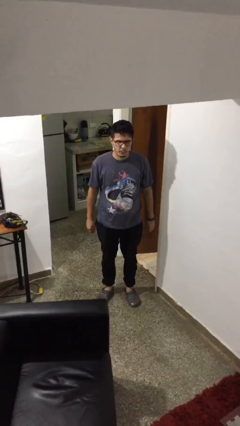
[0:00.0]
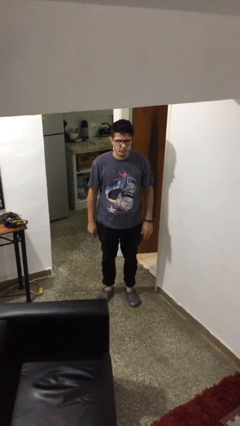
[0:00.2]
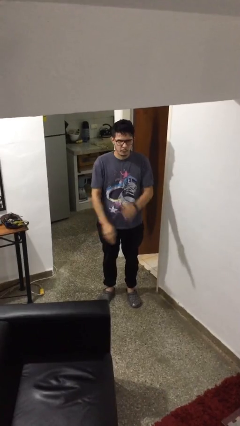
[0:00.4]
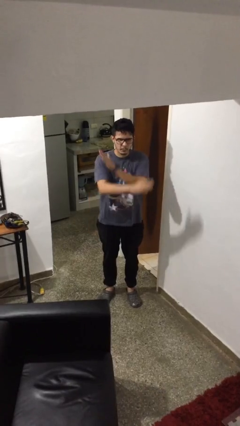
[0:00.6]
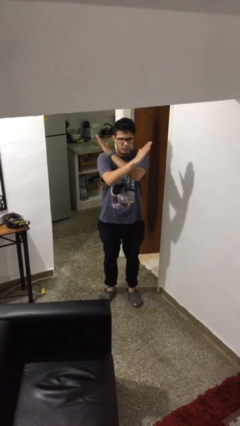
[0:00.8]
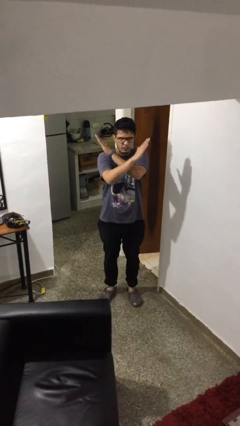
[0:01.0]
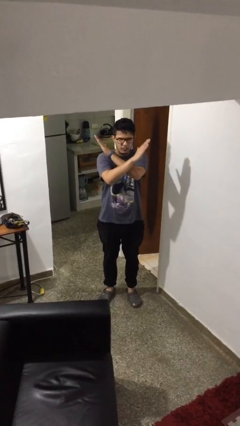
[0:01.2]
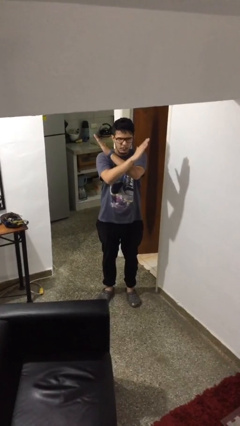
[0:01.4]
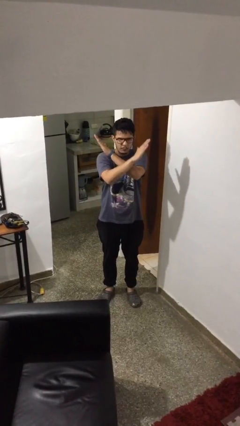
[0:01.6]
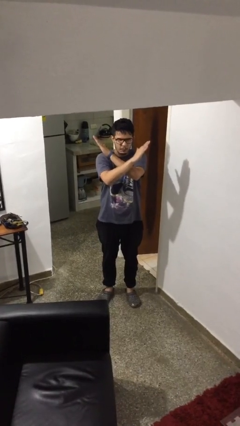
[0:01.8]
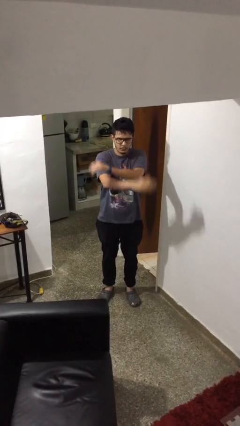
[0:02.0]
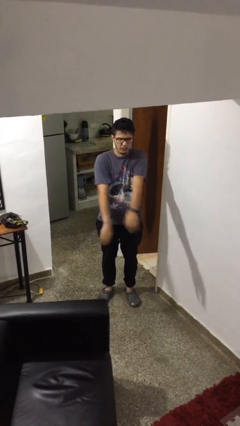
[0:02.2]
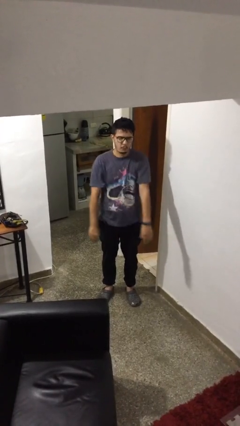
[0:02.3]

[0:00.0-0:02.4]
person gestures arms x

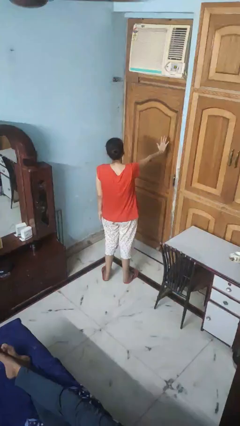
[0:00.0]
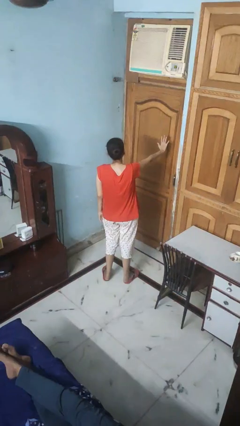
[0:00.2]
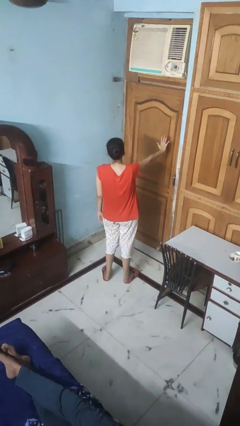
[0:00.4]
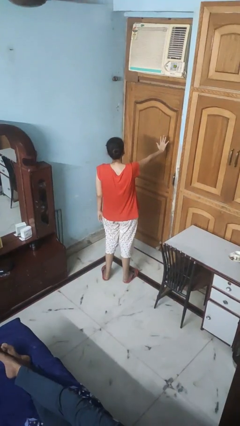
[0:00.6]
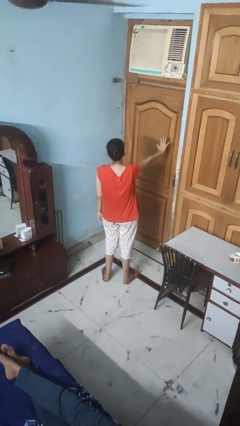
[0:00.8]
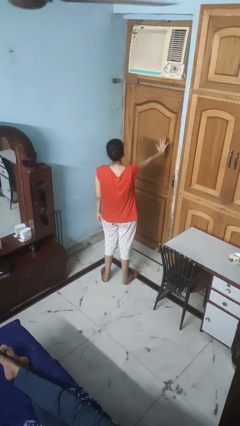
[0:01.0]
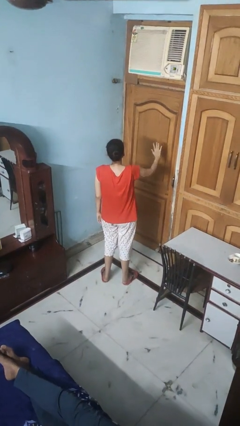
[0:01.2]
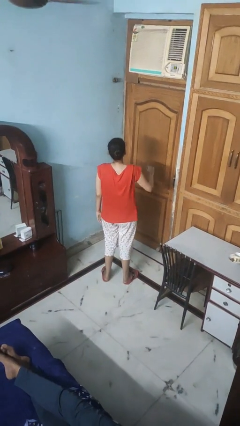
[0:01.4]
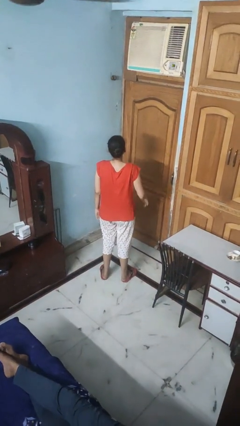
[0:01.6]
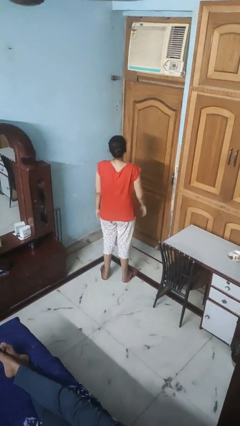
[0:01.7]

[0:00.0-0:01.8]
person gestures number five

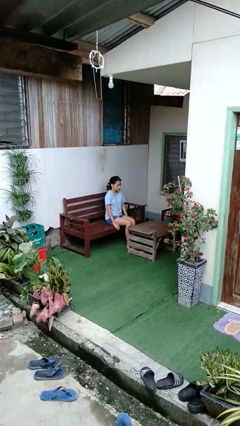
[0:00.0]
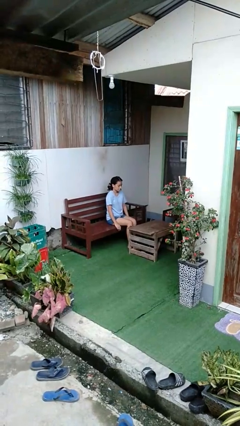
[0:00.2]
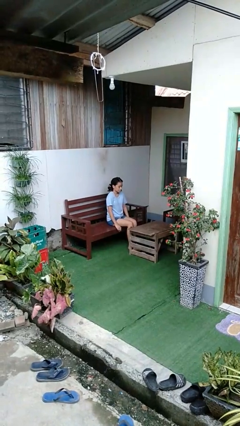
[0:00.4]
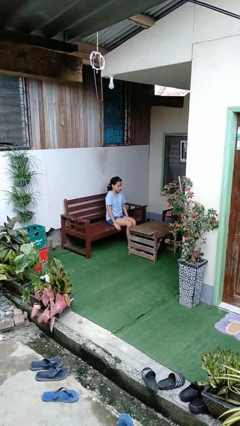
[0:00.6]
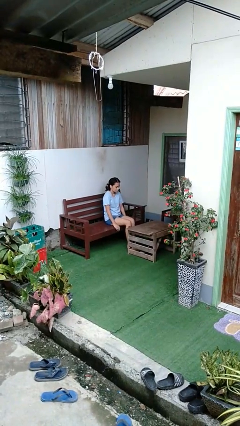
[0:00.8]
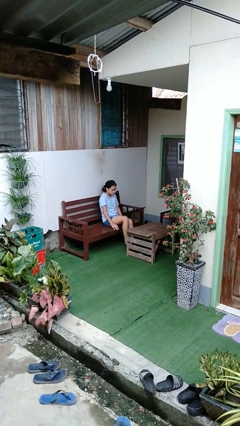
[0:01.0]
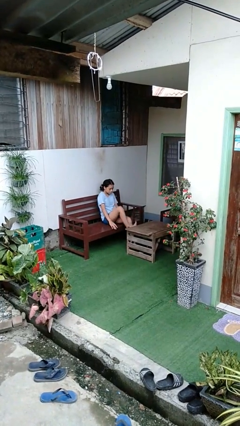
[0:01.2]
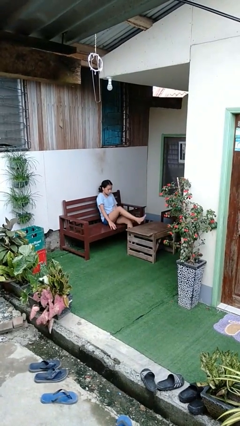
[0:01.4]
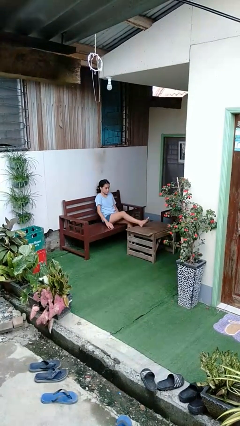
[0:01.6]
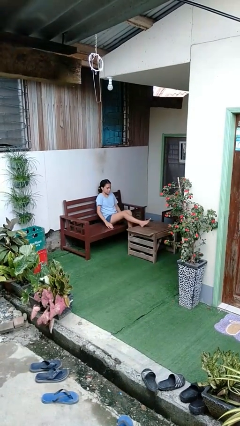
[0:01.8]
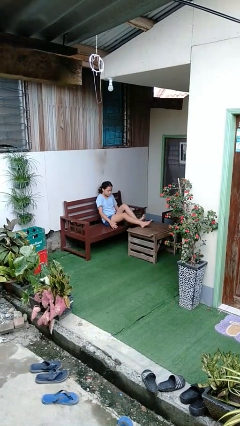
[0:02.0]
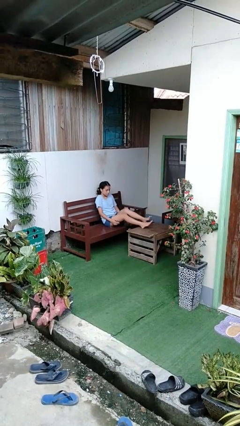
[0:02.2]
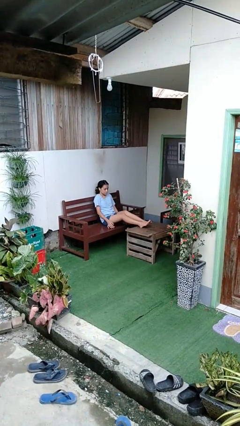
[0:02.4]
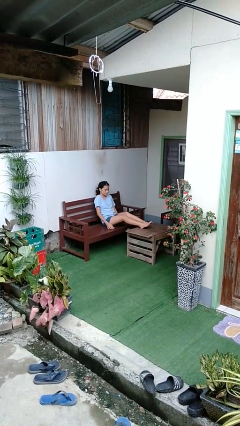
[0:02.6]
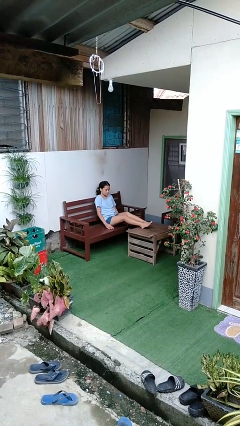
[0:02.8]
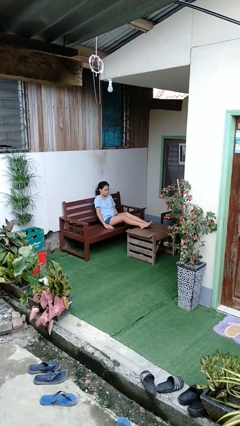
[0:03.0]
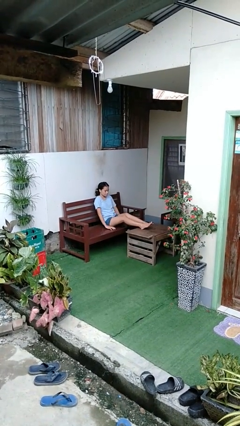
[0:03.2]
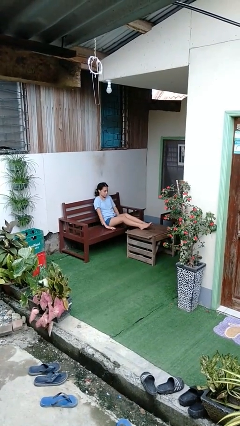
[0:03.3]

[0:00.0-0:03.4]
person puts feet up

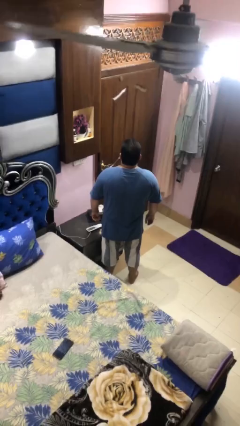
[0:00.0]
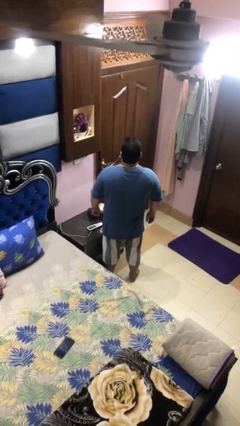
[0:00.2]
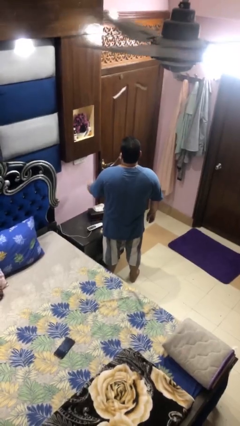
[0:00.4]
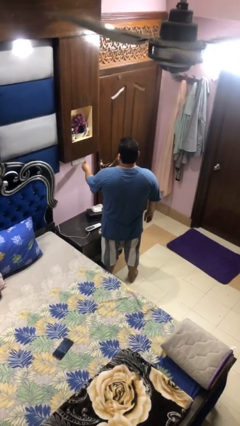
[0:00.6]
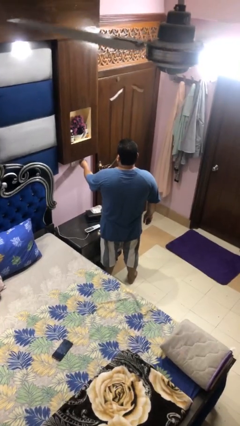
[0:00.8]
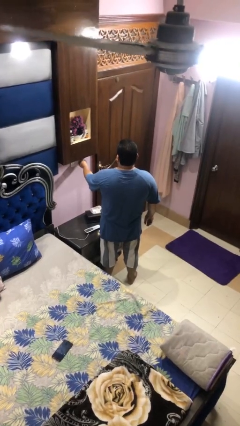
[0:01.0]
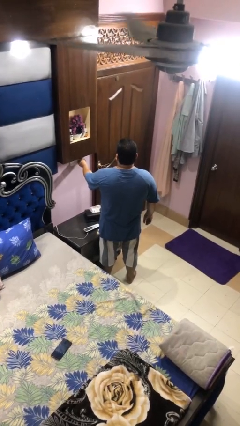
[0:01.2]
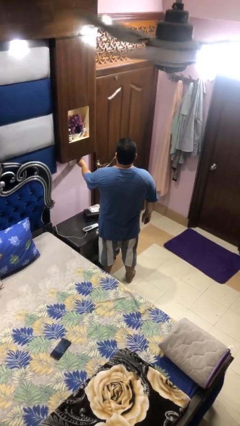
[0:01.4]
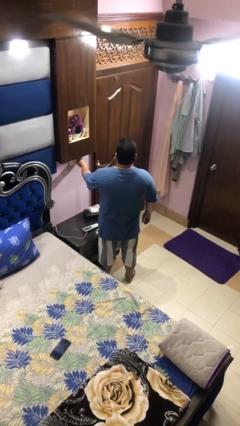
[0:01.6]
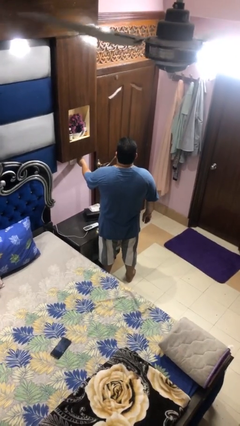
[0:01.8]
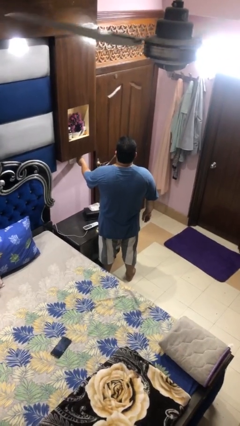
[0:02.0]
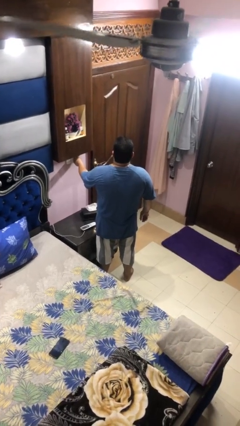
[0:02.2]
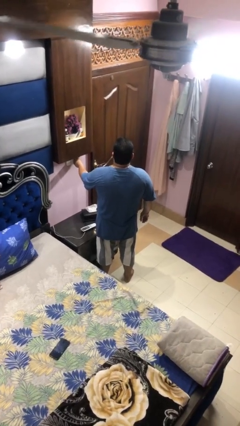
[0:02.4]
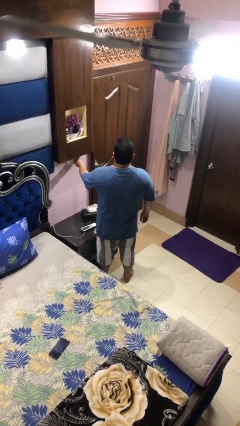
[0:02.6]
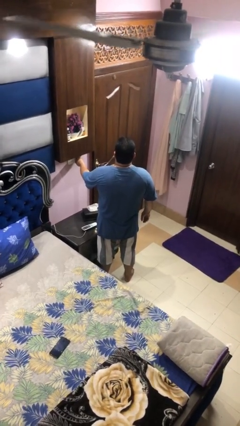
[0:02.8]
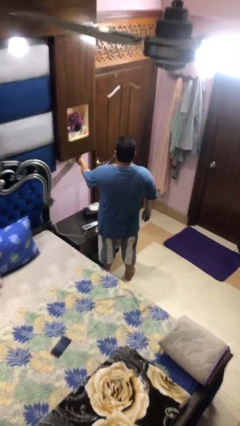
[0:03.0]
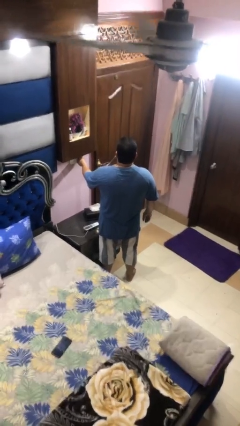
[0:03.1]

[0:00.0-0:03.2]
person turns on fan

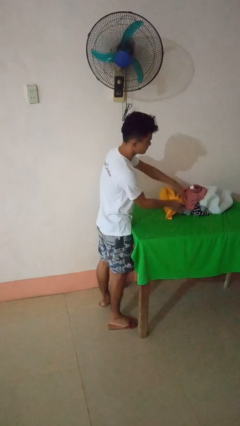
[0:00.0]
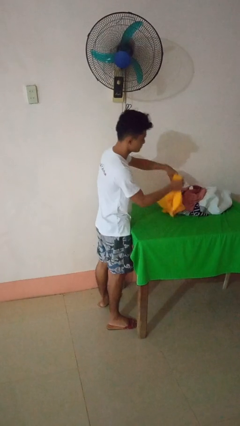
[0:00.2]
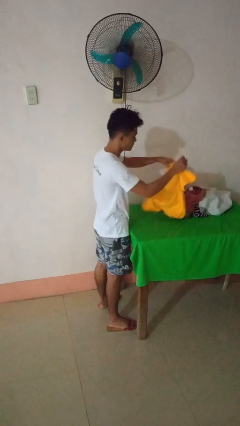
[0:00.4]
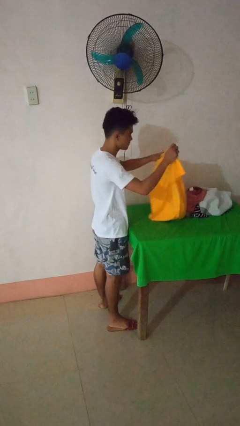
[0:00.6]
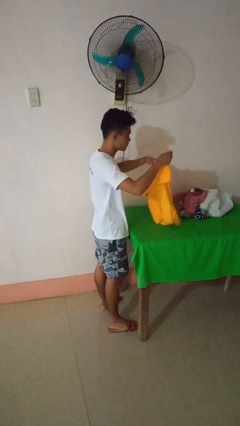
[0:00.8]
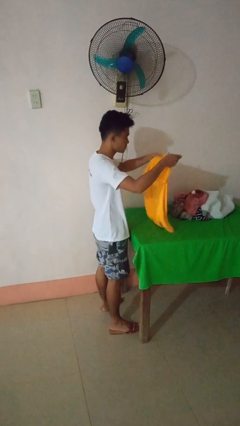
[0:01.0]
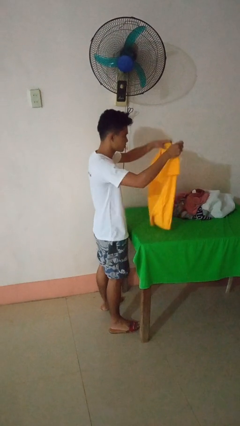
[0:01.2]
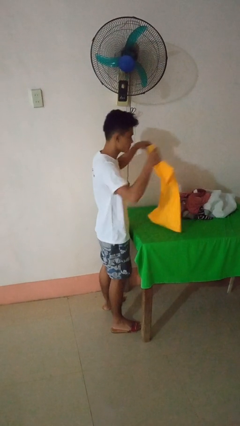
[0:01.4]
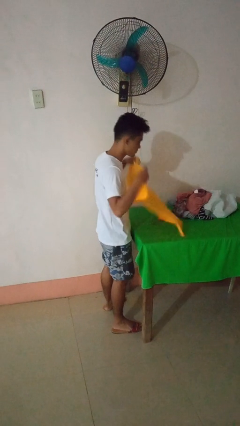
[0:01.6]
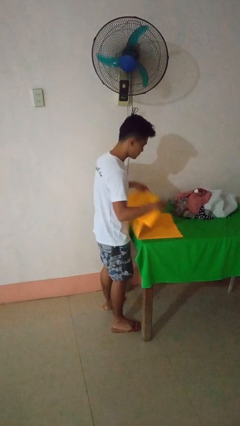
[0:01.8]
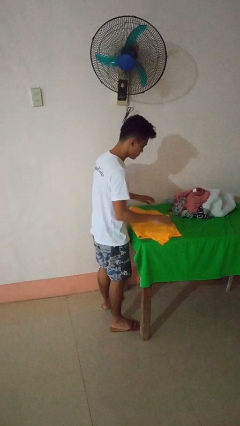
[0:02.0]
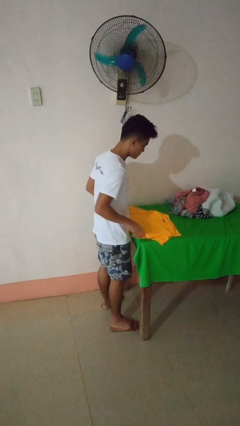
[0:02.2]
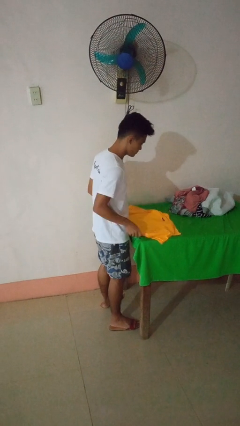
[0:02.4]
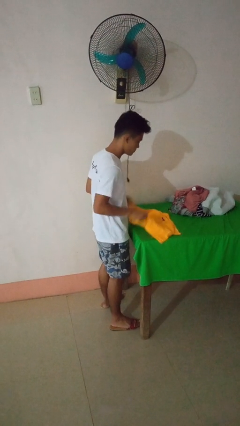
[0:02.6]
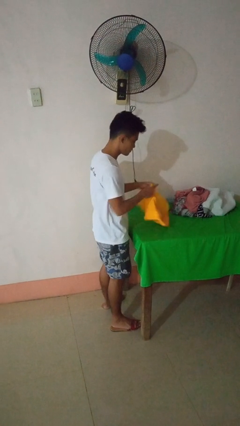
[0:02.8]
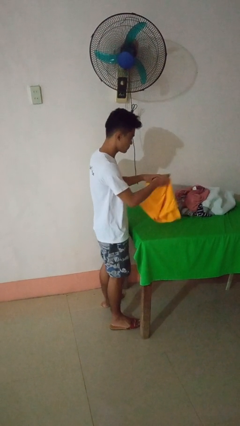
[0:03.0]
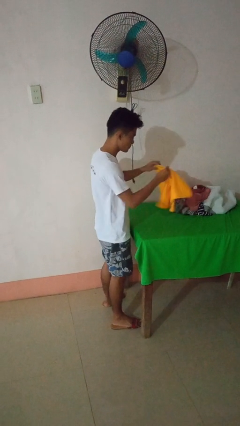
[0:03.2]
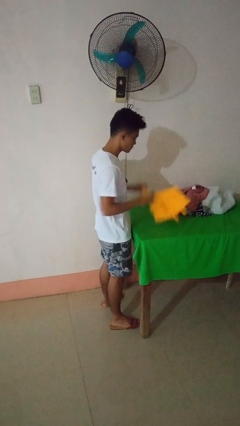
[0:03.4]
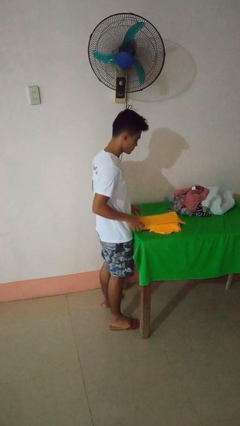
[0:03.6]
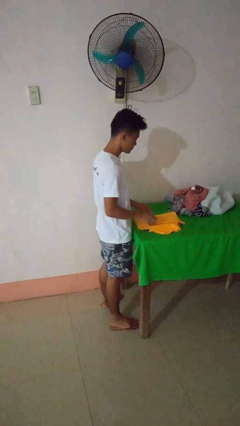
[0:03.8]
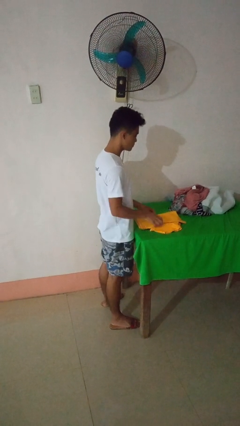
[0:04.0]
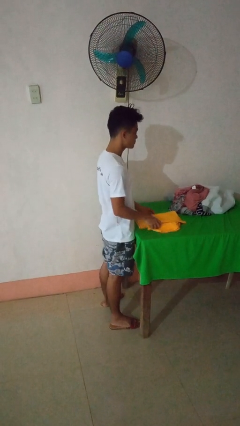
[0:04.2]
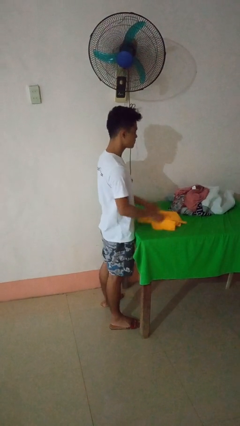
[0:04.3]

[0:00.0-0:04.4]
person folds shirt

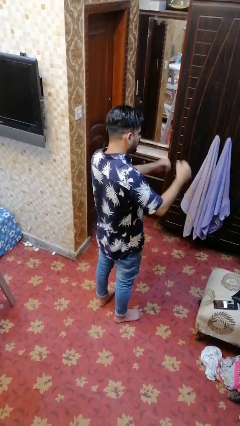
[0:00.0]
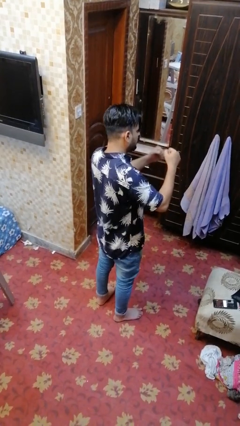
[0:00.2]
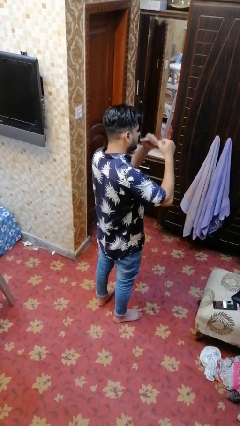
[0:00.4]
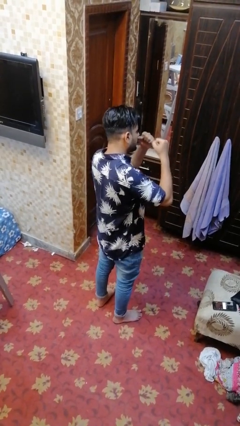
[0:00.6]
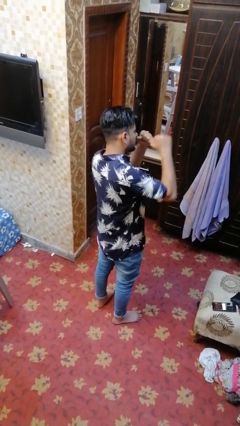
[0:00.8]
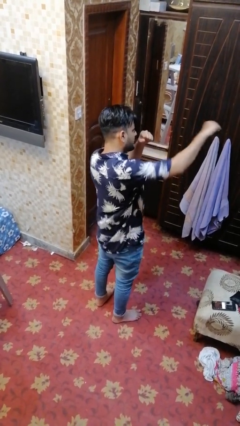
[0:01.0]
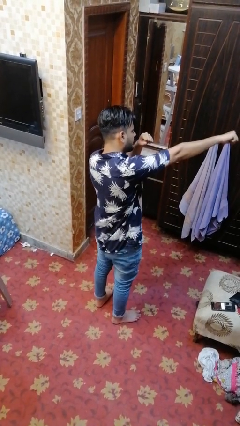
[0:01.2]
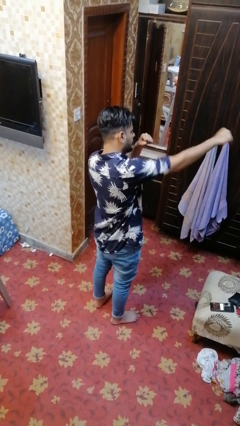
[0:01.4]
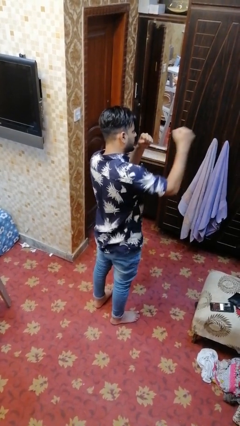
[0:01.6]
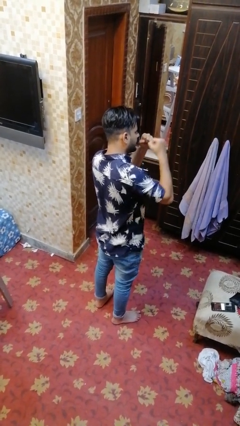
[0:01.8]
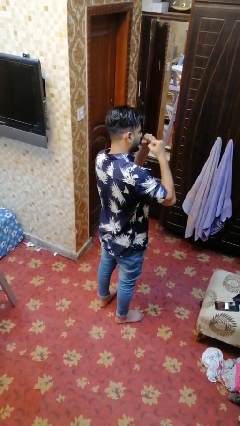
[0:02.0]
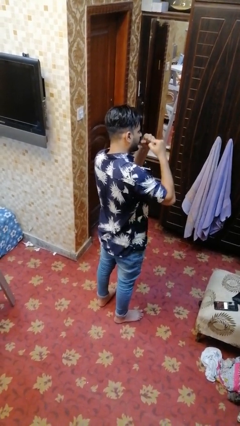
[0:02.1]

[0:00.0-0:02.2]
person punches
